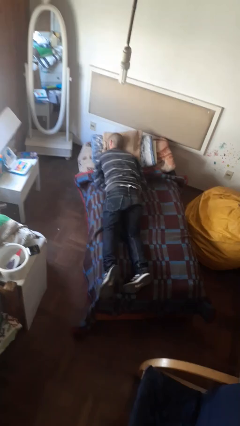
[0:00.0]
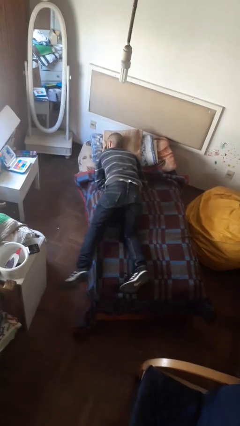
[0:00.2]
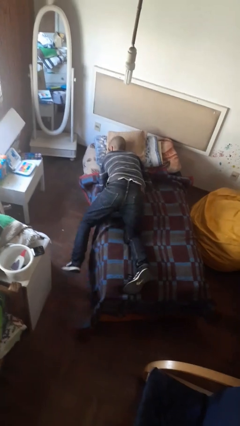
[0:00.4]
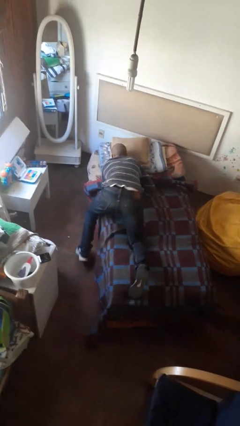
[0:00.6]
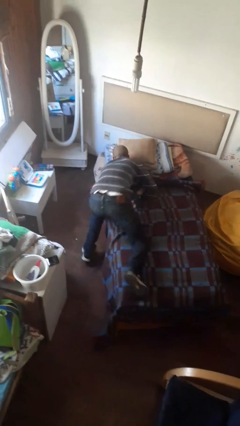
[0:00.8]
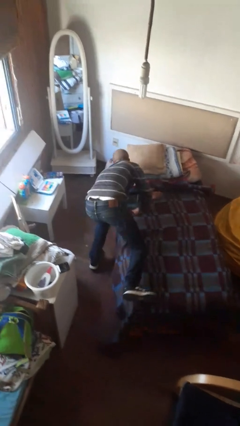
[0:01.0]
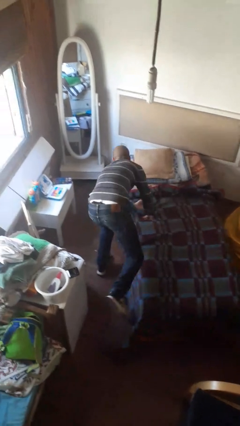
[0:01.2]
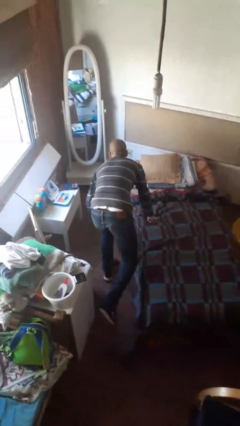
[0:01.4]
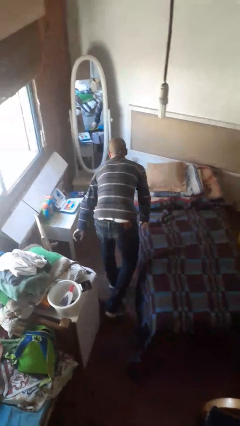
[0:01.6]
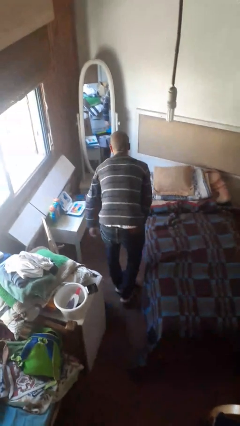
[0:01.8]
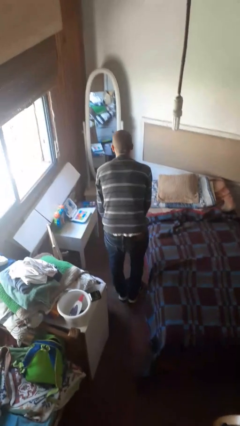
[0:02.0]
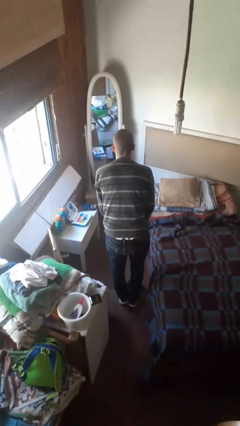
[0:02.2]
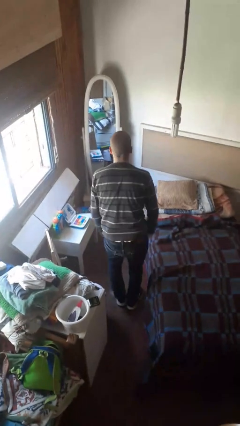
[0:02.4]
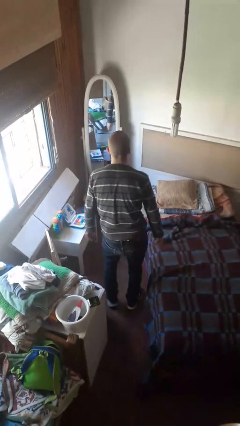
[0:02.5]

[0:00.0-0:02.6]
person stands up

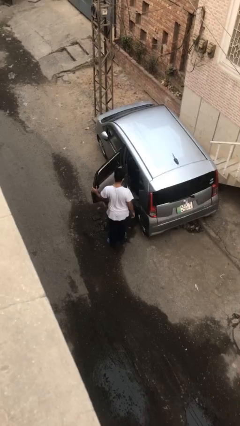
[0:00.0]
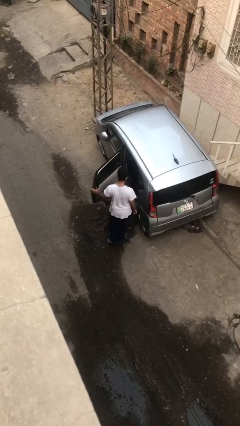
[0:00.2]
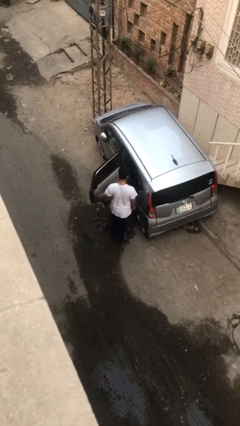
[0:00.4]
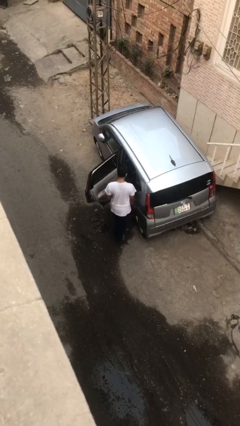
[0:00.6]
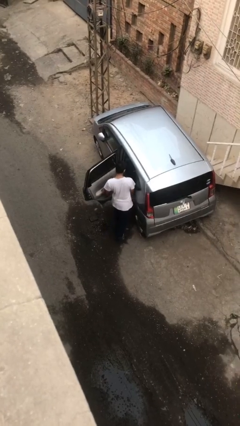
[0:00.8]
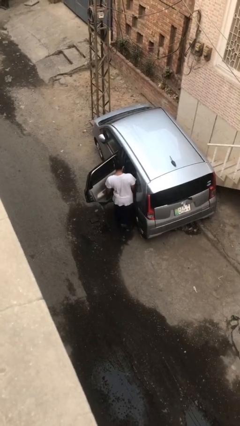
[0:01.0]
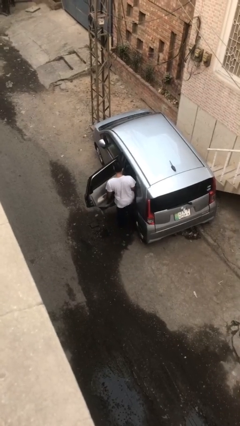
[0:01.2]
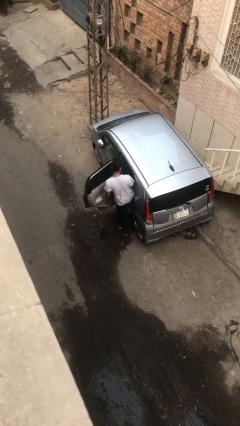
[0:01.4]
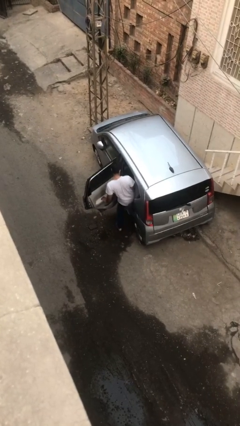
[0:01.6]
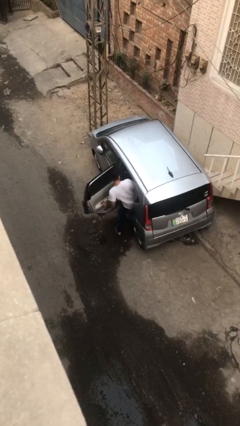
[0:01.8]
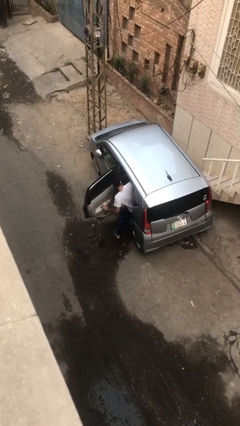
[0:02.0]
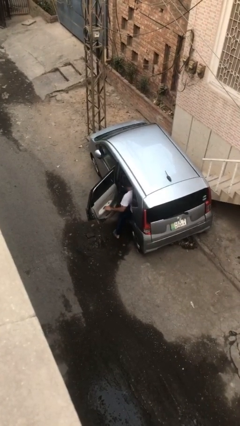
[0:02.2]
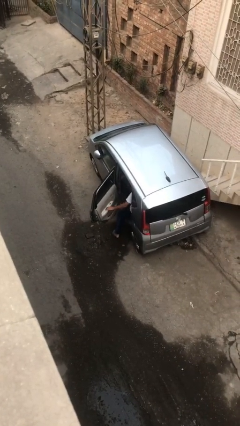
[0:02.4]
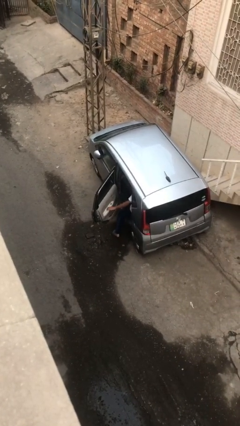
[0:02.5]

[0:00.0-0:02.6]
person enters car

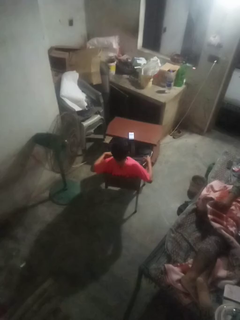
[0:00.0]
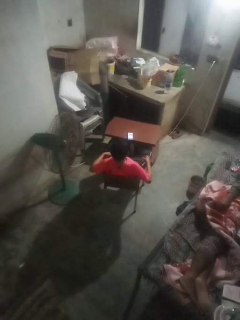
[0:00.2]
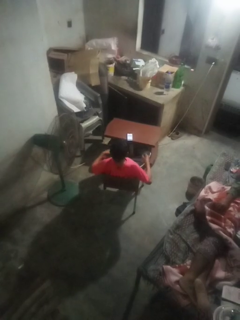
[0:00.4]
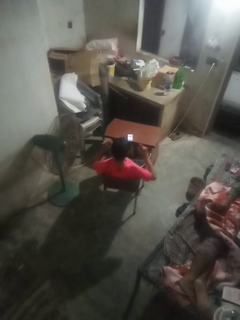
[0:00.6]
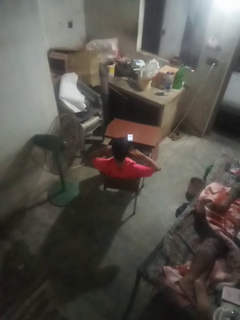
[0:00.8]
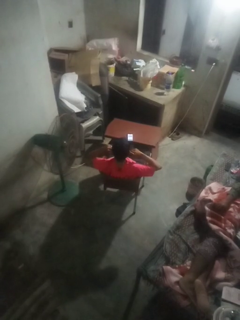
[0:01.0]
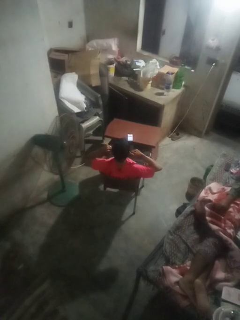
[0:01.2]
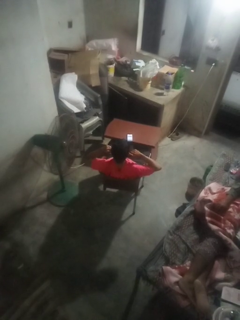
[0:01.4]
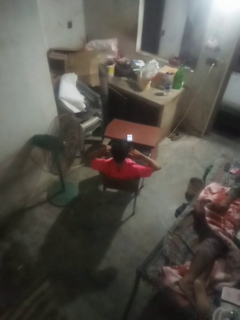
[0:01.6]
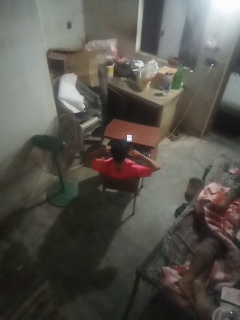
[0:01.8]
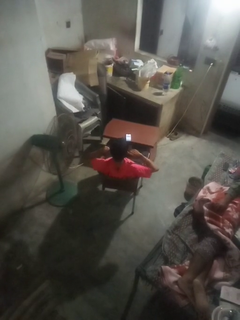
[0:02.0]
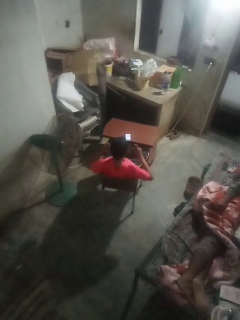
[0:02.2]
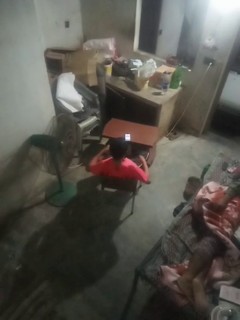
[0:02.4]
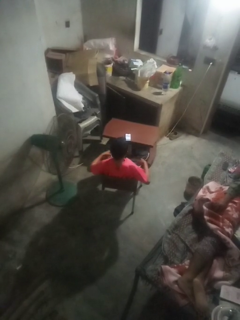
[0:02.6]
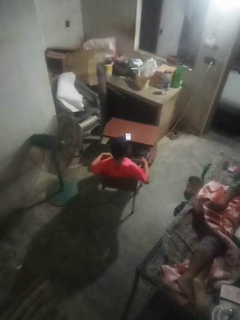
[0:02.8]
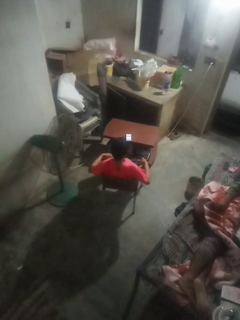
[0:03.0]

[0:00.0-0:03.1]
person puts fingers in ear

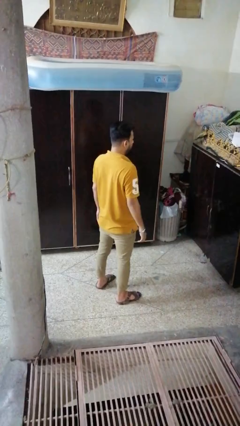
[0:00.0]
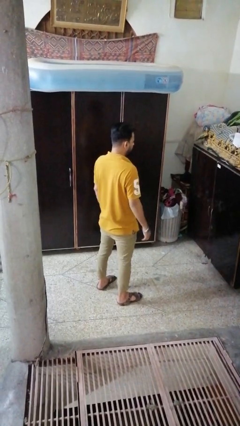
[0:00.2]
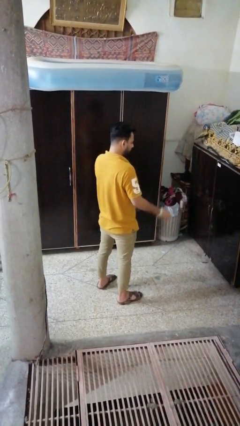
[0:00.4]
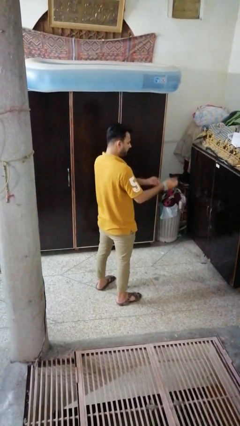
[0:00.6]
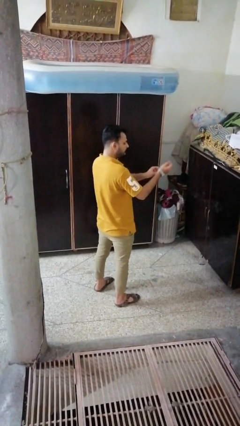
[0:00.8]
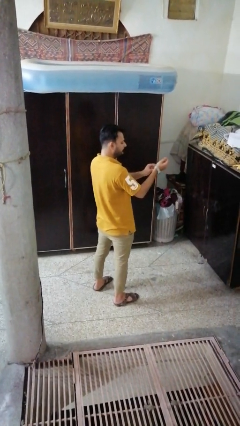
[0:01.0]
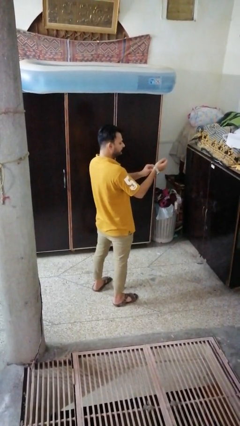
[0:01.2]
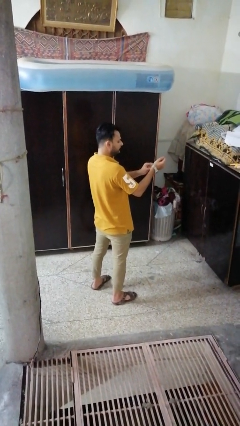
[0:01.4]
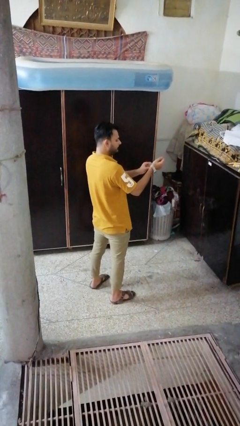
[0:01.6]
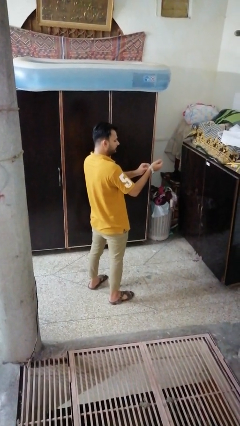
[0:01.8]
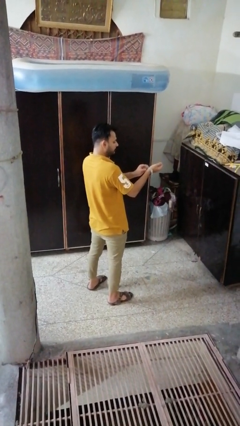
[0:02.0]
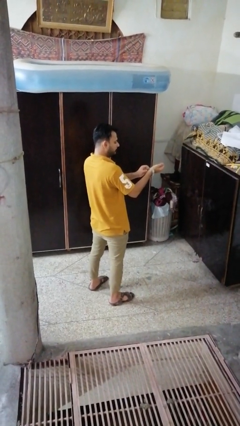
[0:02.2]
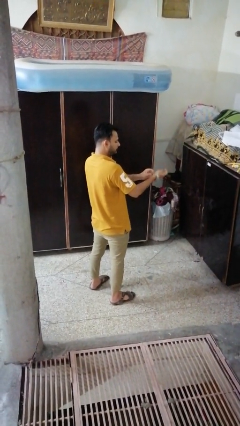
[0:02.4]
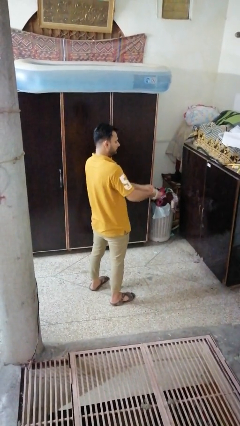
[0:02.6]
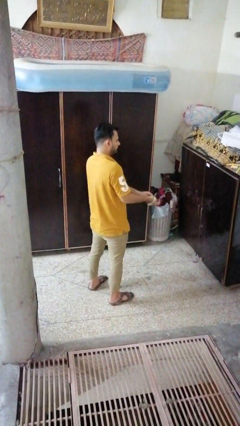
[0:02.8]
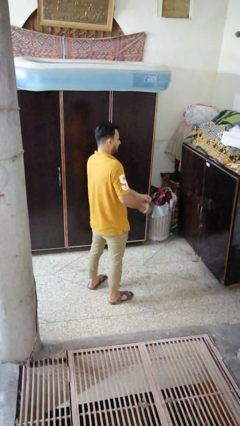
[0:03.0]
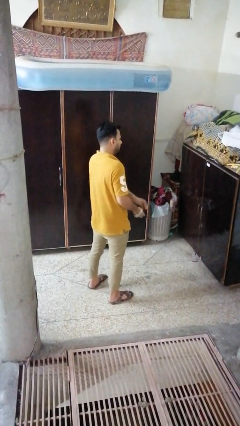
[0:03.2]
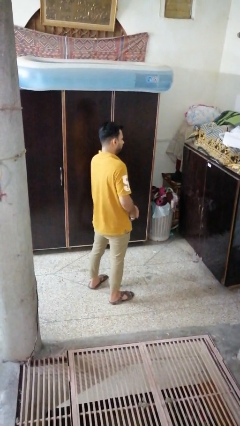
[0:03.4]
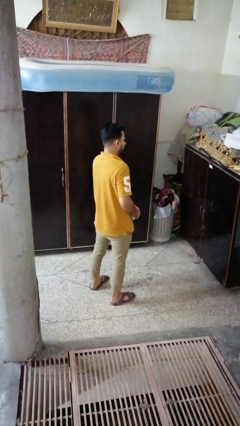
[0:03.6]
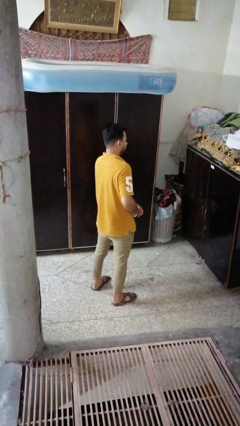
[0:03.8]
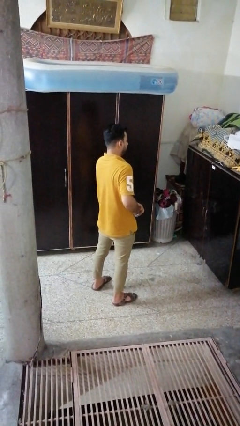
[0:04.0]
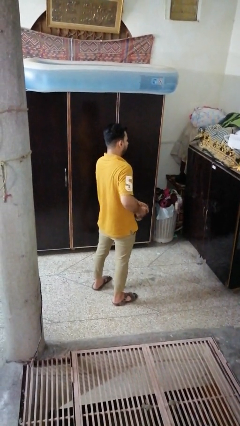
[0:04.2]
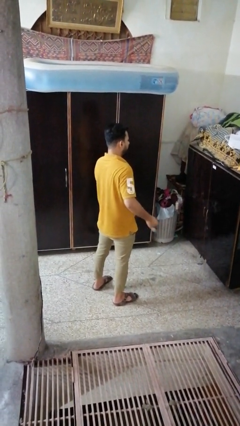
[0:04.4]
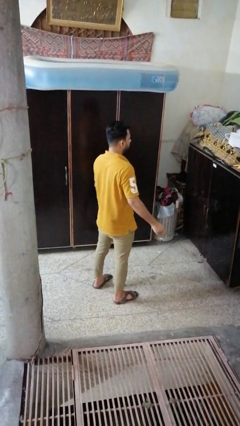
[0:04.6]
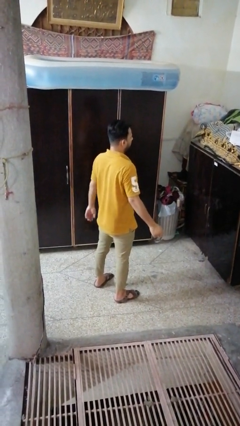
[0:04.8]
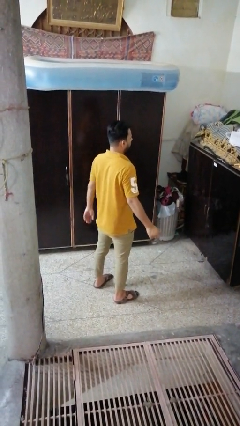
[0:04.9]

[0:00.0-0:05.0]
person takes off wristwatch

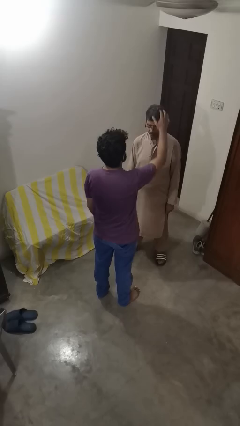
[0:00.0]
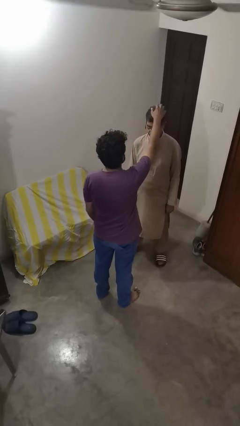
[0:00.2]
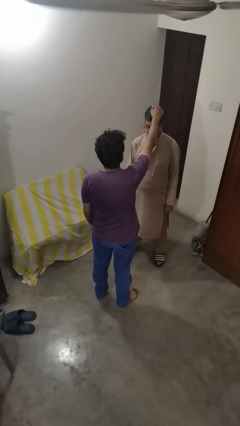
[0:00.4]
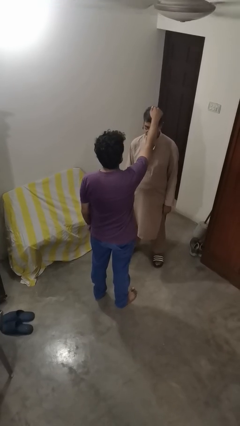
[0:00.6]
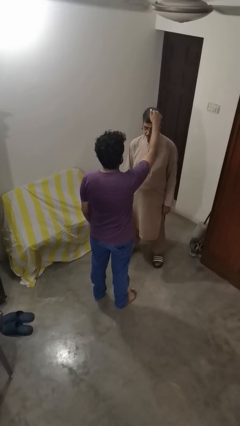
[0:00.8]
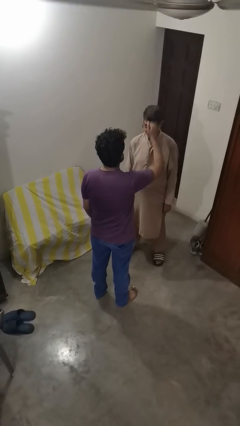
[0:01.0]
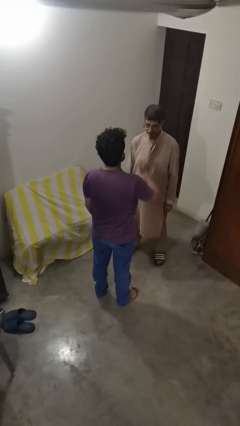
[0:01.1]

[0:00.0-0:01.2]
person grabs person by hair

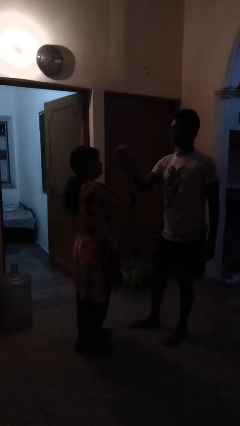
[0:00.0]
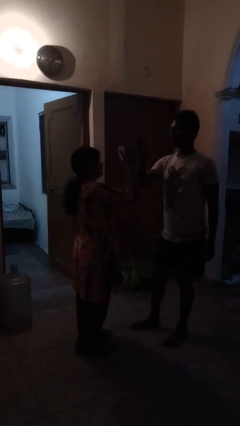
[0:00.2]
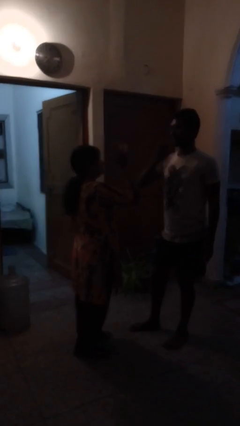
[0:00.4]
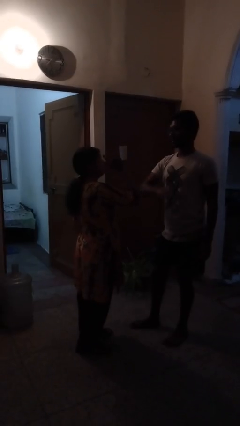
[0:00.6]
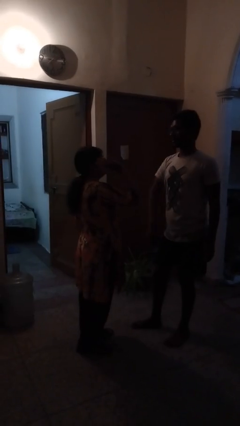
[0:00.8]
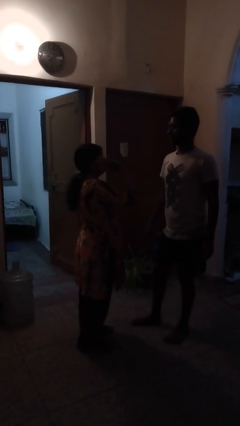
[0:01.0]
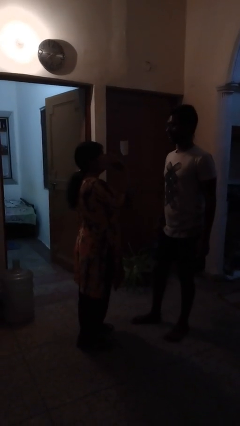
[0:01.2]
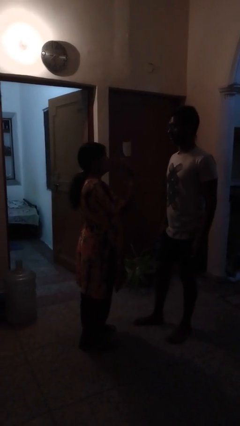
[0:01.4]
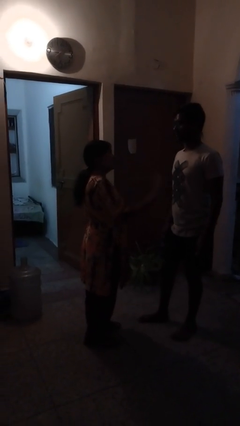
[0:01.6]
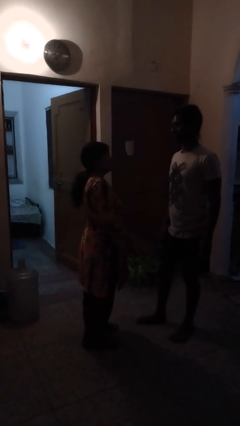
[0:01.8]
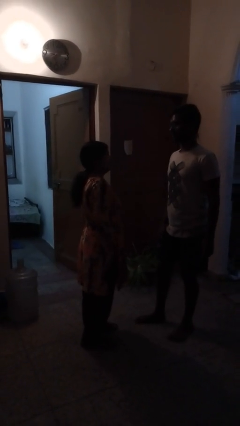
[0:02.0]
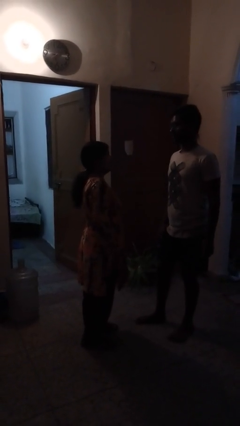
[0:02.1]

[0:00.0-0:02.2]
person highfives hand

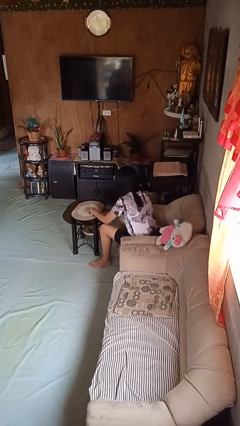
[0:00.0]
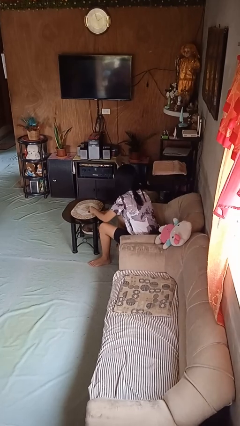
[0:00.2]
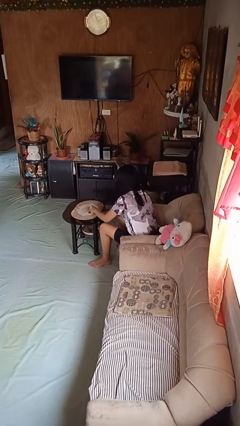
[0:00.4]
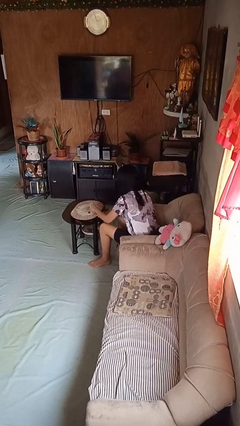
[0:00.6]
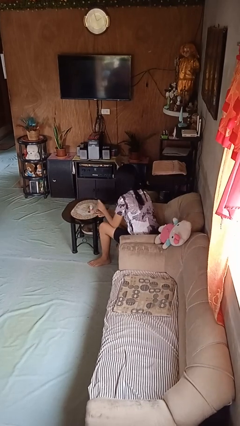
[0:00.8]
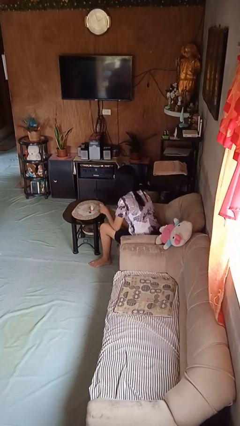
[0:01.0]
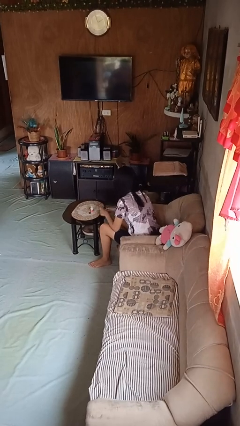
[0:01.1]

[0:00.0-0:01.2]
person paints fingernails
